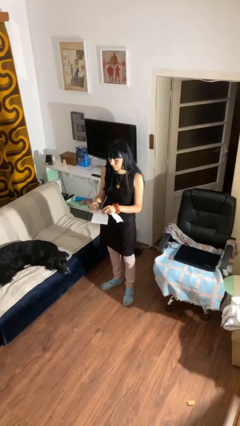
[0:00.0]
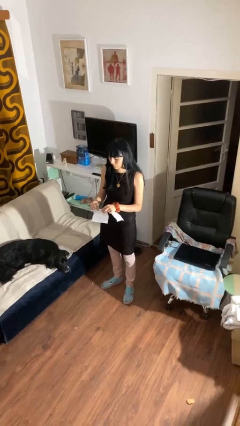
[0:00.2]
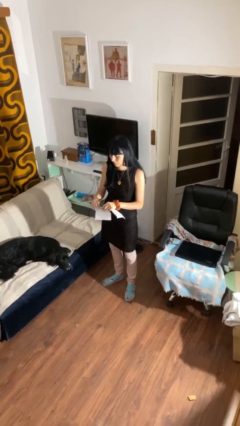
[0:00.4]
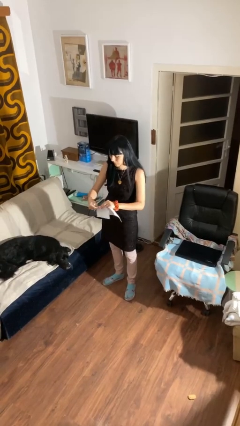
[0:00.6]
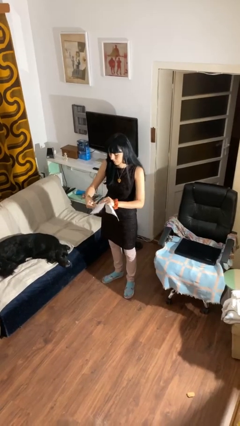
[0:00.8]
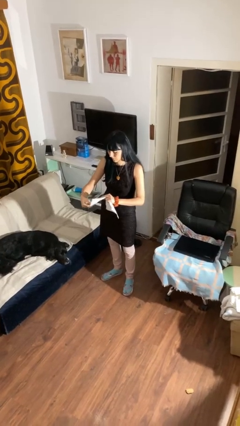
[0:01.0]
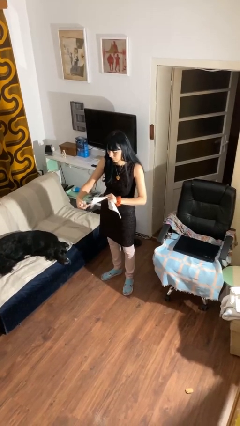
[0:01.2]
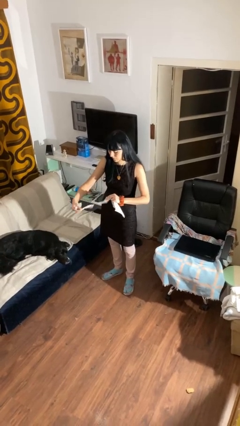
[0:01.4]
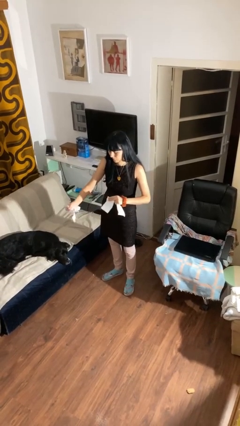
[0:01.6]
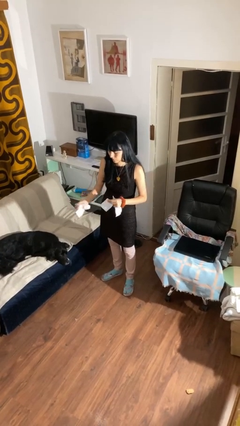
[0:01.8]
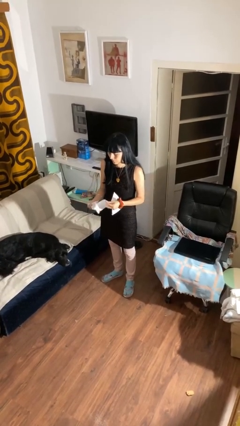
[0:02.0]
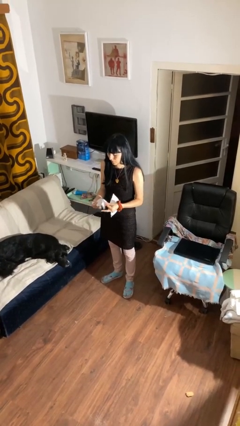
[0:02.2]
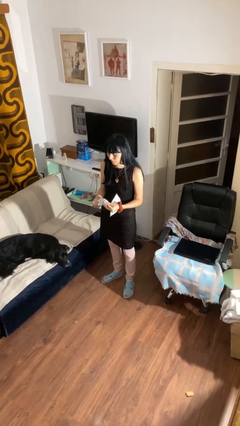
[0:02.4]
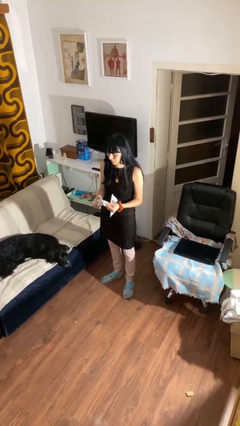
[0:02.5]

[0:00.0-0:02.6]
person tears paper

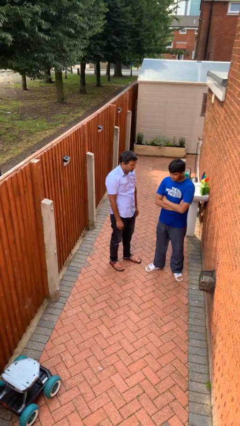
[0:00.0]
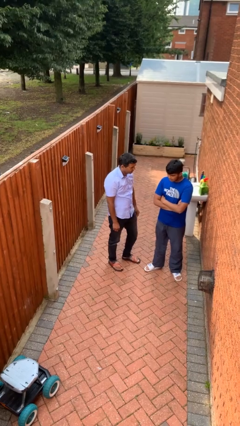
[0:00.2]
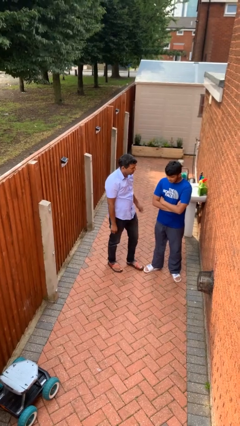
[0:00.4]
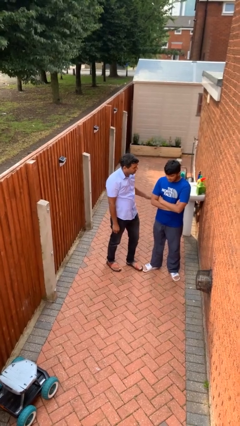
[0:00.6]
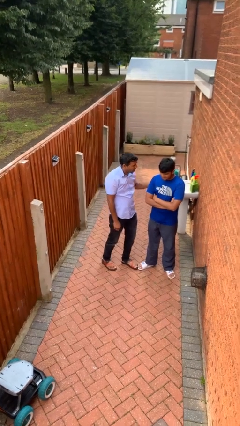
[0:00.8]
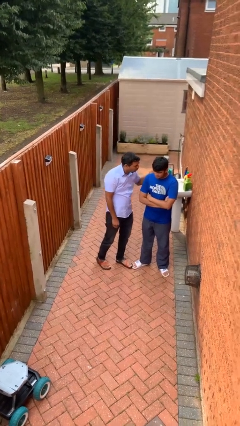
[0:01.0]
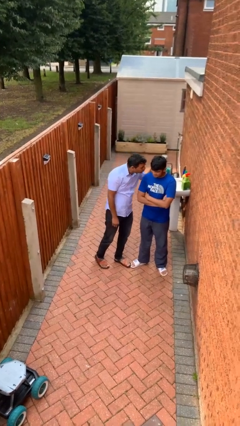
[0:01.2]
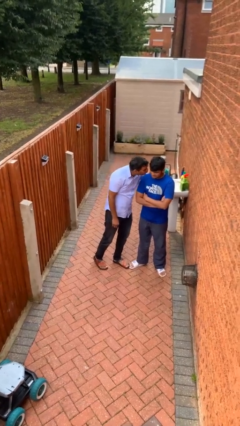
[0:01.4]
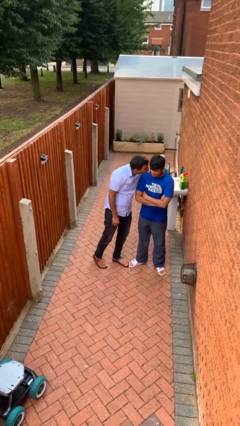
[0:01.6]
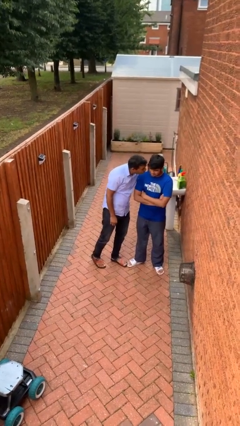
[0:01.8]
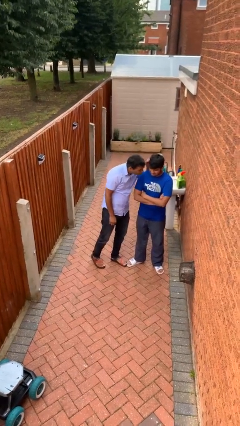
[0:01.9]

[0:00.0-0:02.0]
person kisses cheek of person

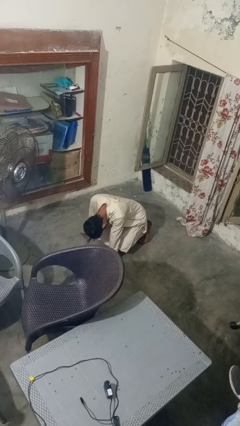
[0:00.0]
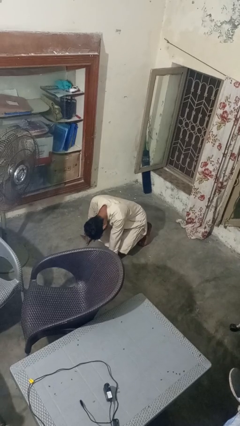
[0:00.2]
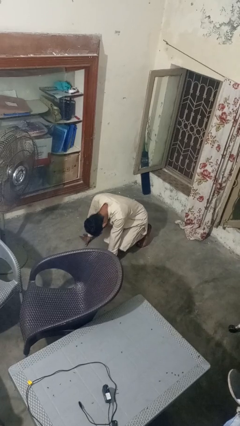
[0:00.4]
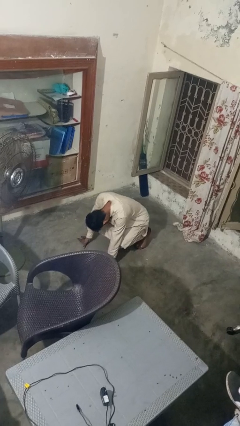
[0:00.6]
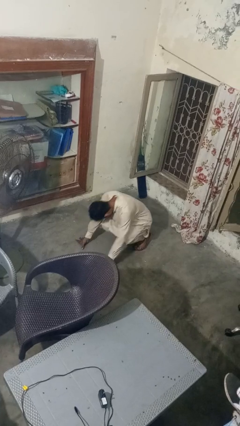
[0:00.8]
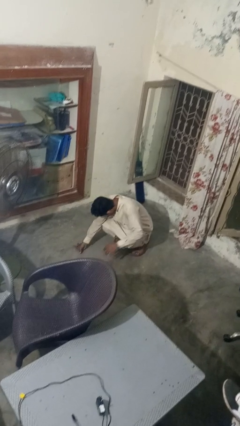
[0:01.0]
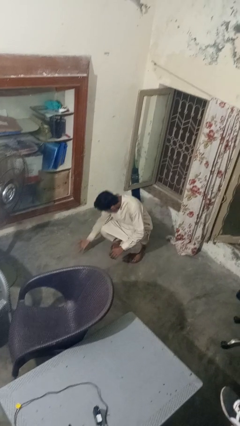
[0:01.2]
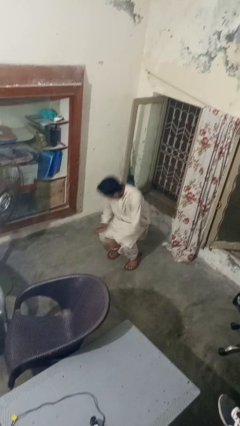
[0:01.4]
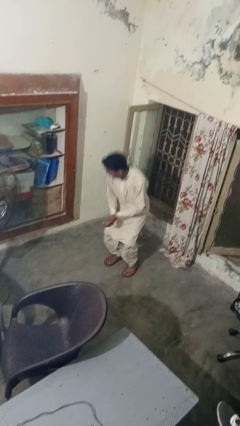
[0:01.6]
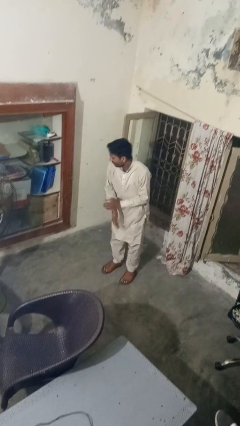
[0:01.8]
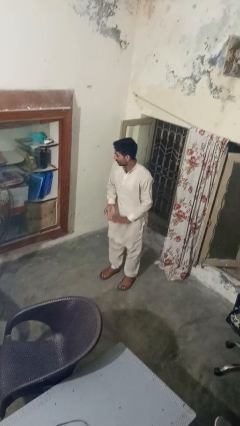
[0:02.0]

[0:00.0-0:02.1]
person stands up from floor

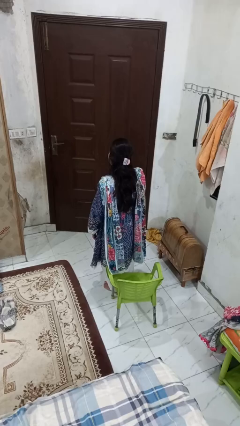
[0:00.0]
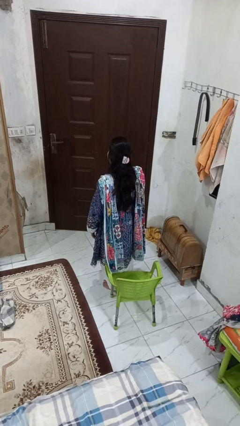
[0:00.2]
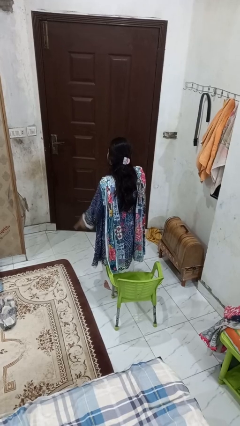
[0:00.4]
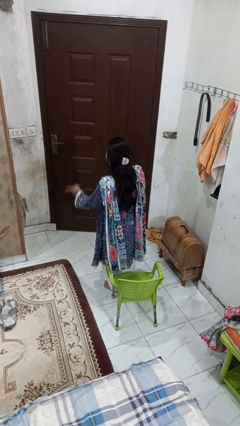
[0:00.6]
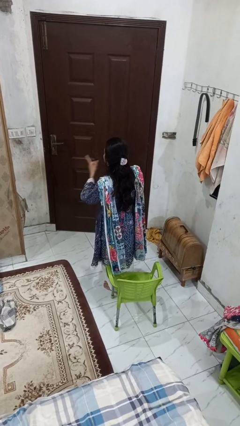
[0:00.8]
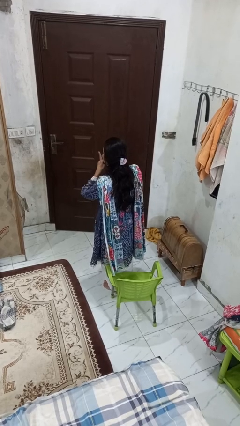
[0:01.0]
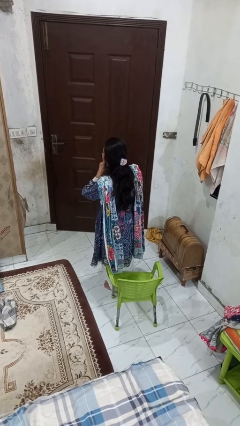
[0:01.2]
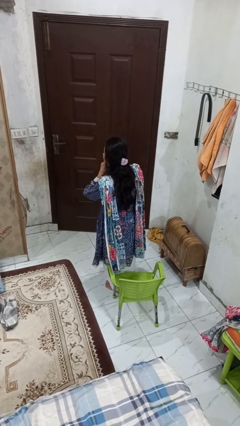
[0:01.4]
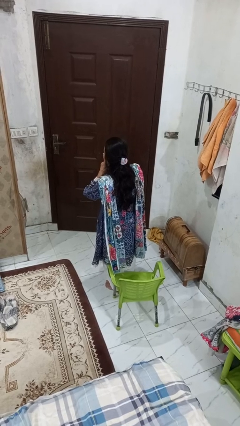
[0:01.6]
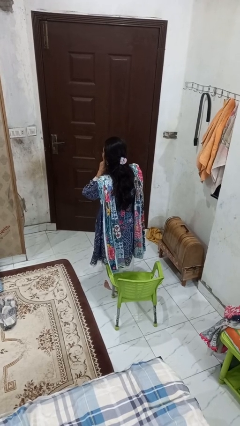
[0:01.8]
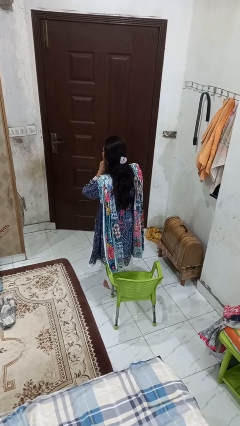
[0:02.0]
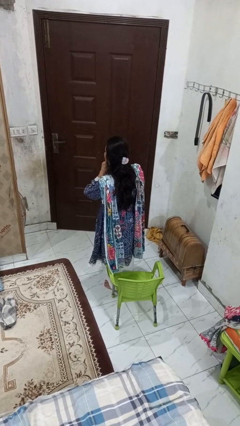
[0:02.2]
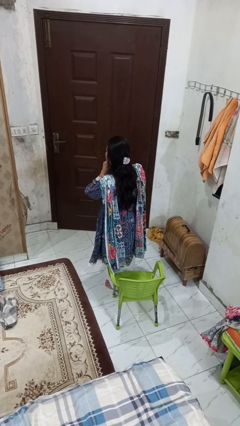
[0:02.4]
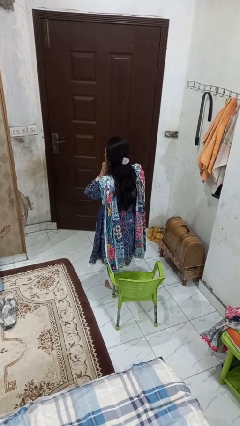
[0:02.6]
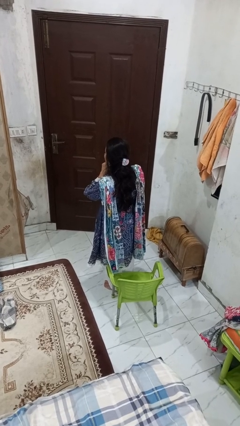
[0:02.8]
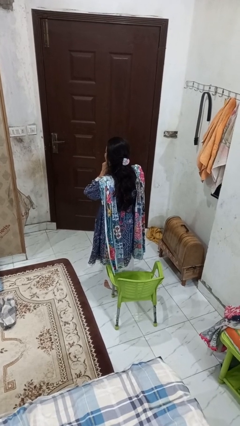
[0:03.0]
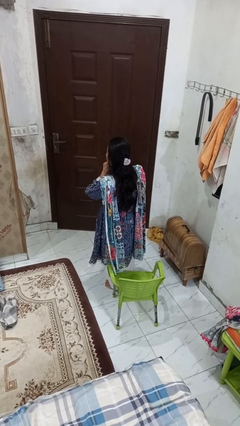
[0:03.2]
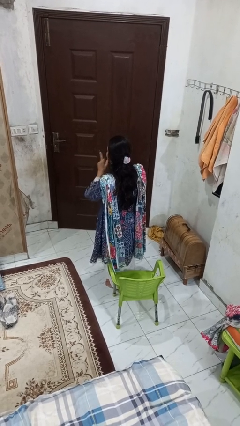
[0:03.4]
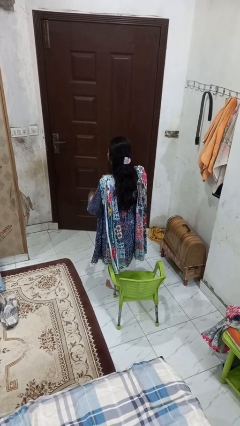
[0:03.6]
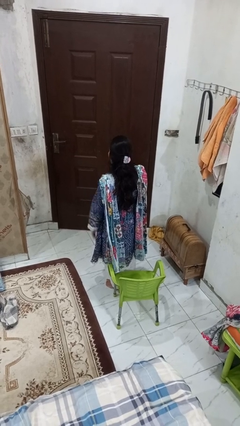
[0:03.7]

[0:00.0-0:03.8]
person gestures be quiet

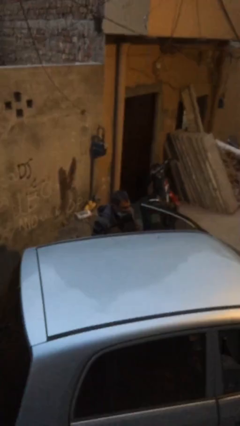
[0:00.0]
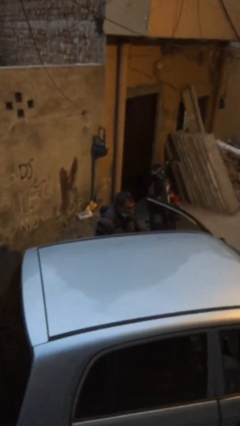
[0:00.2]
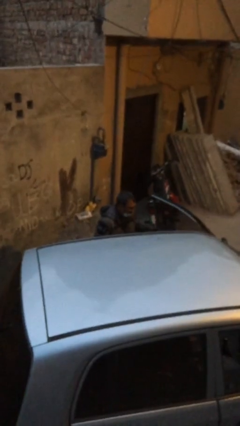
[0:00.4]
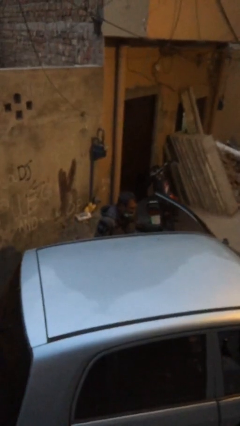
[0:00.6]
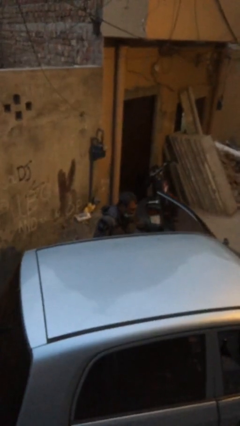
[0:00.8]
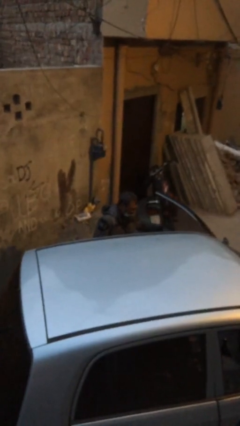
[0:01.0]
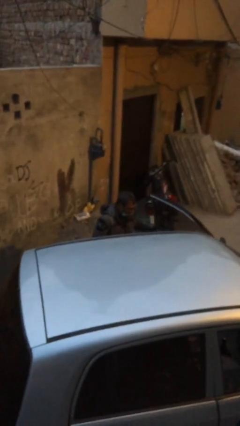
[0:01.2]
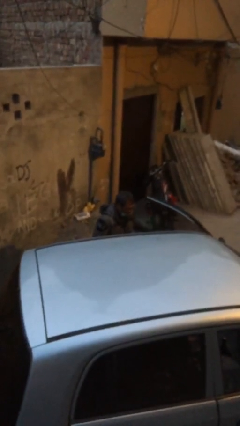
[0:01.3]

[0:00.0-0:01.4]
person opens car door

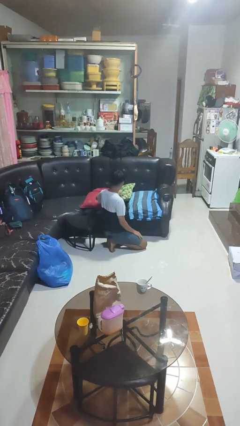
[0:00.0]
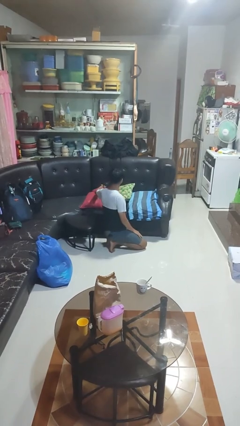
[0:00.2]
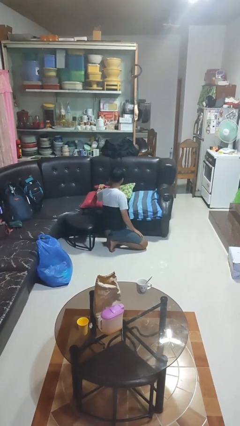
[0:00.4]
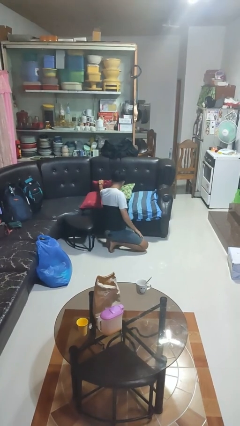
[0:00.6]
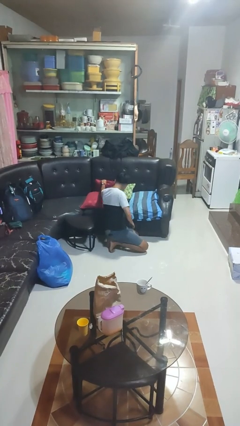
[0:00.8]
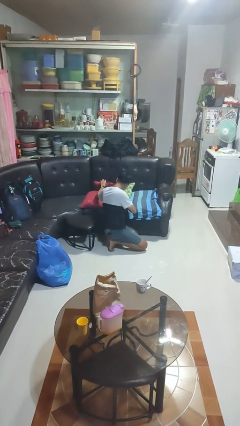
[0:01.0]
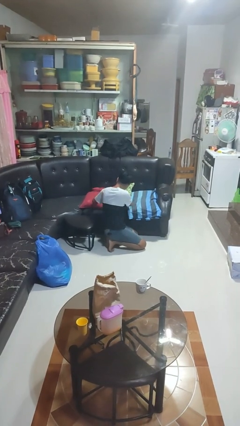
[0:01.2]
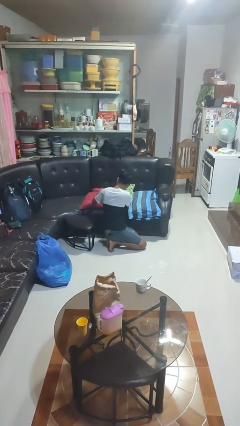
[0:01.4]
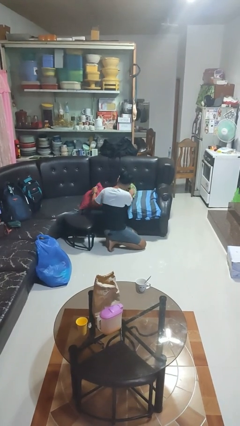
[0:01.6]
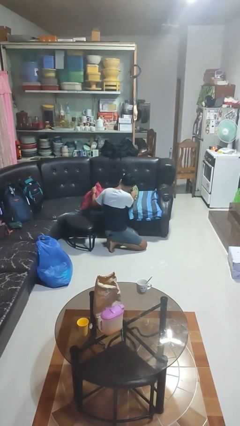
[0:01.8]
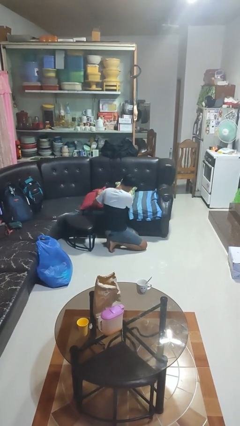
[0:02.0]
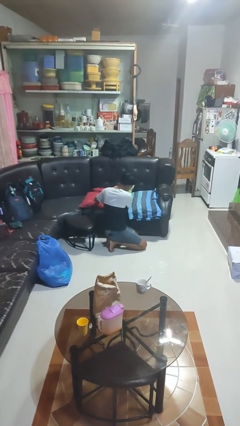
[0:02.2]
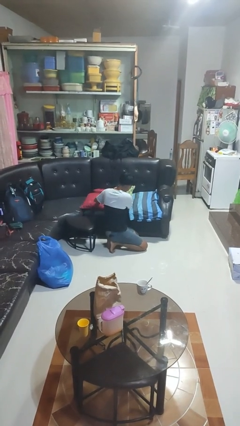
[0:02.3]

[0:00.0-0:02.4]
person searches in couch

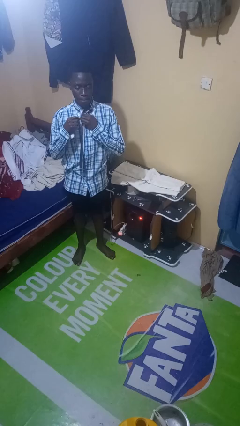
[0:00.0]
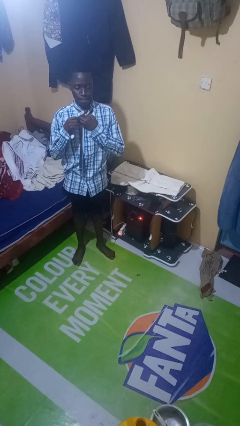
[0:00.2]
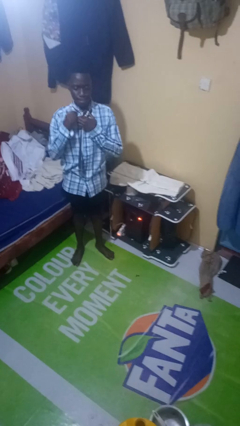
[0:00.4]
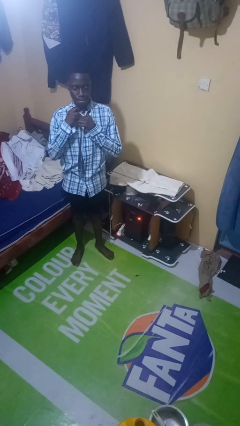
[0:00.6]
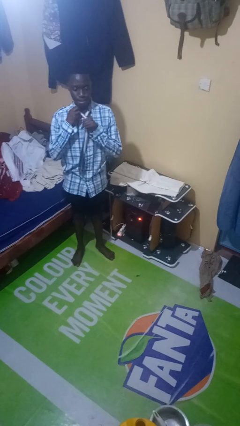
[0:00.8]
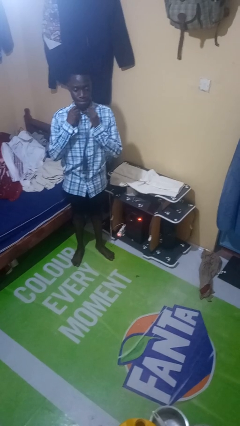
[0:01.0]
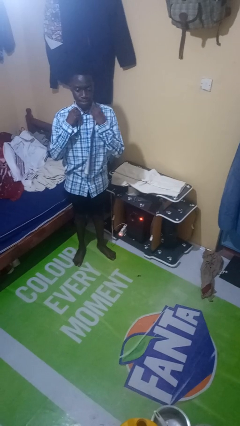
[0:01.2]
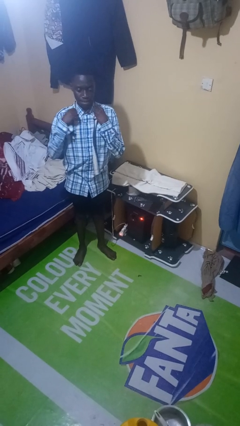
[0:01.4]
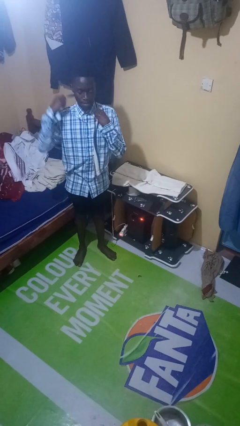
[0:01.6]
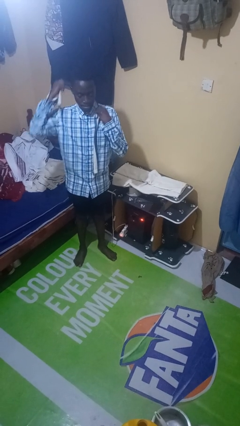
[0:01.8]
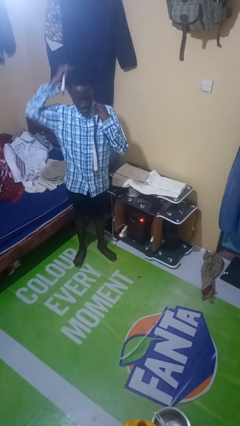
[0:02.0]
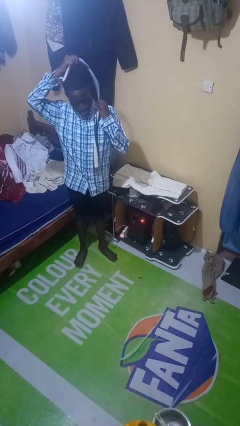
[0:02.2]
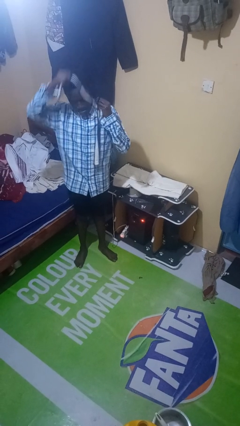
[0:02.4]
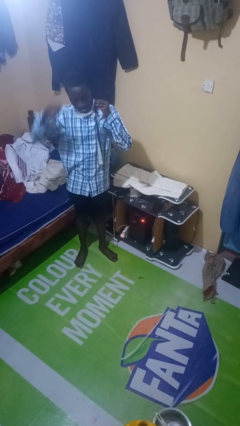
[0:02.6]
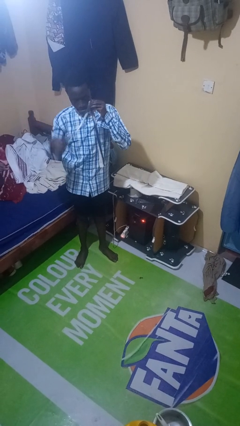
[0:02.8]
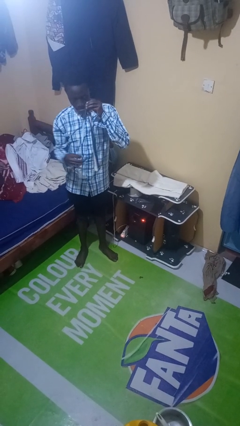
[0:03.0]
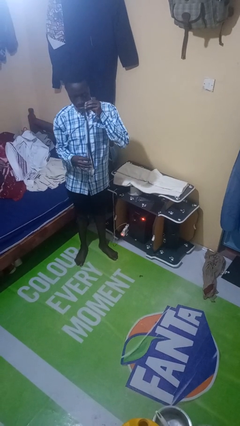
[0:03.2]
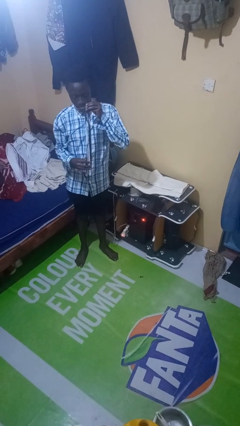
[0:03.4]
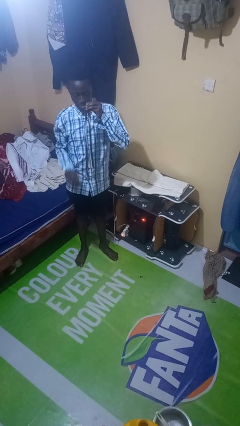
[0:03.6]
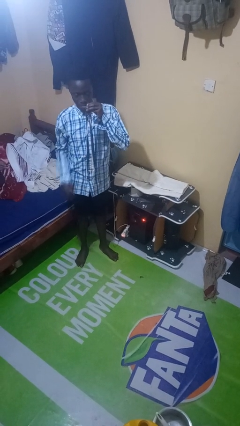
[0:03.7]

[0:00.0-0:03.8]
person takes off necktie
